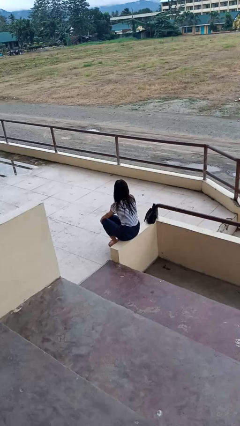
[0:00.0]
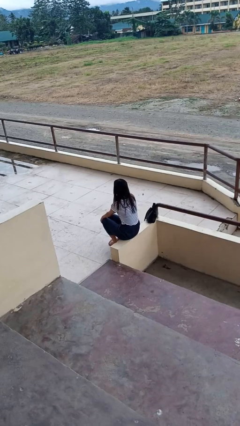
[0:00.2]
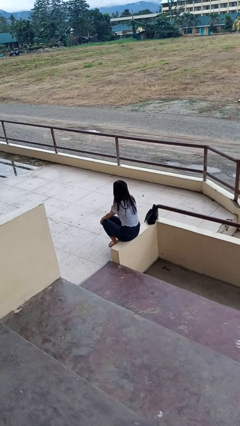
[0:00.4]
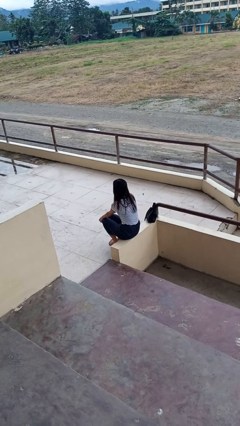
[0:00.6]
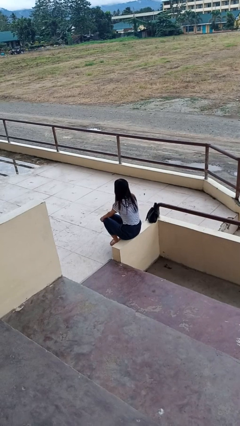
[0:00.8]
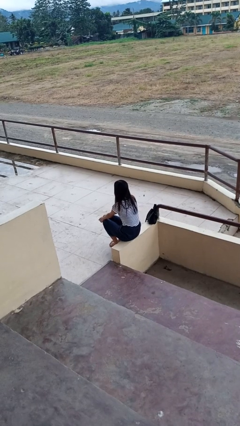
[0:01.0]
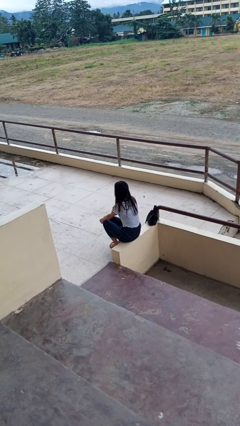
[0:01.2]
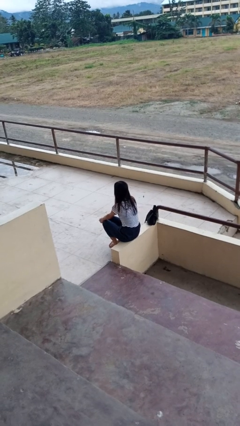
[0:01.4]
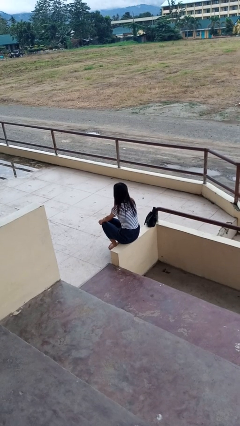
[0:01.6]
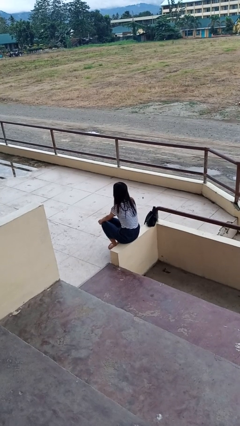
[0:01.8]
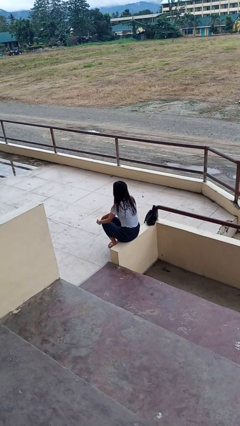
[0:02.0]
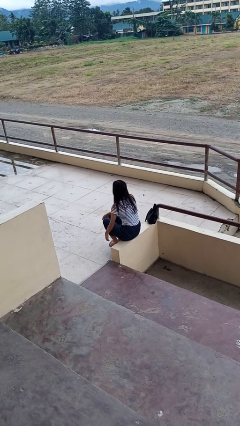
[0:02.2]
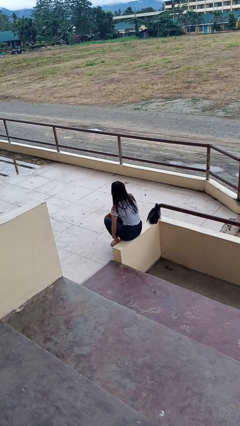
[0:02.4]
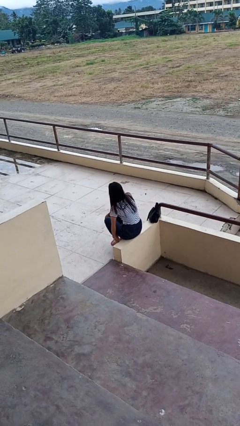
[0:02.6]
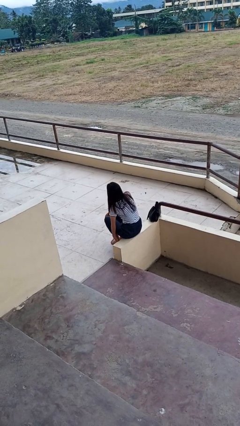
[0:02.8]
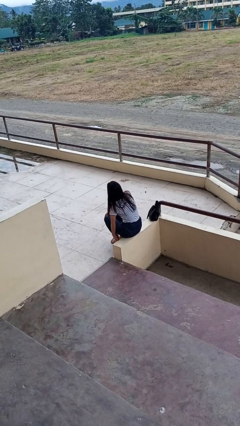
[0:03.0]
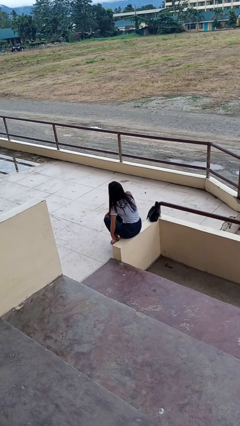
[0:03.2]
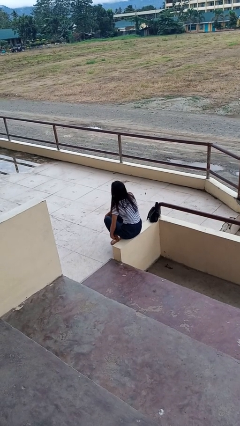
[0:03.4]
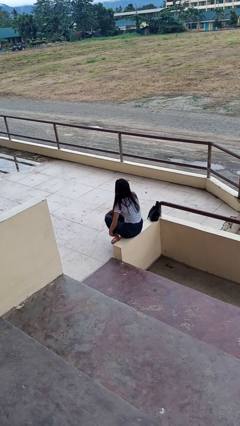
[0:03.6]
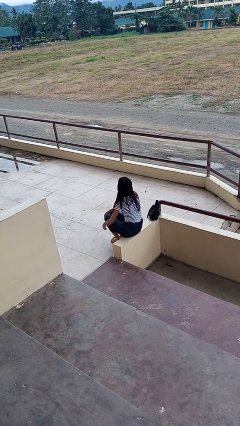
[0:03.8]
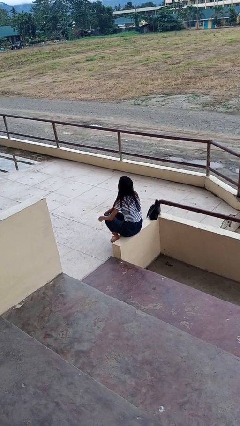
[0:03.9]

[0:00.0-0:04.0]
person rubs foot

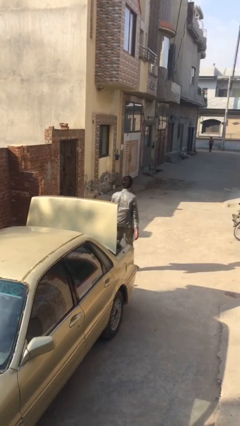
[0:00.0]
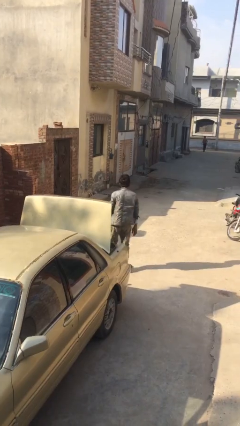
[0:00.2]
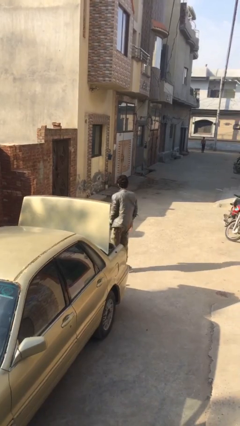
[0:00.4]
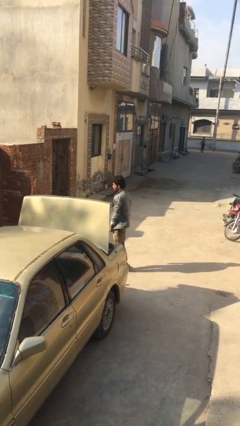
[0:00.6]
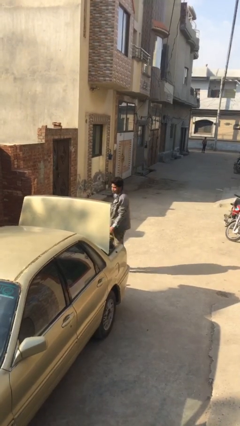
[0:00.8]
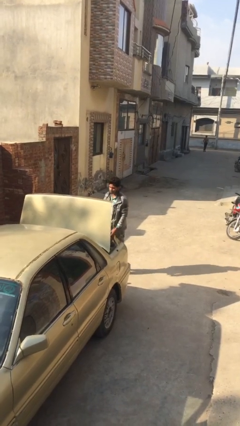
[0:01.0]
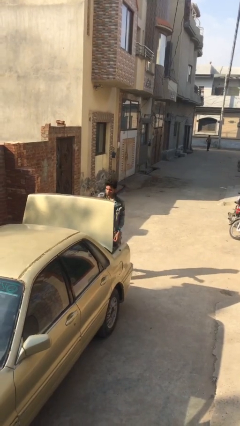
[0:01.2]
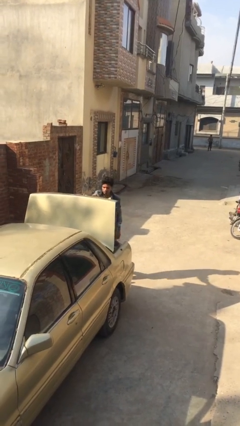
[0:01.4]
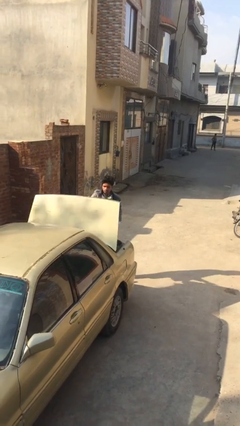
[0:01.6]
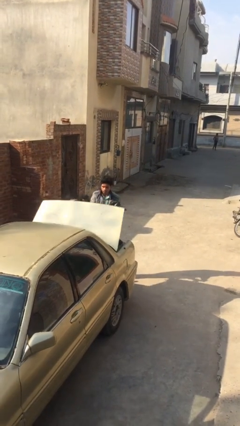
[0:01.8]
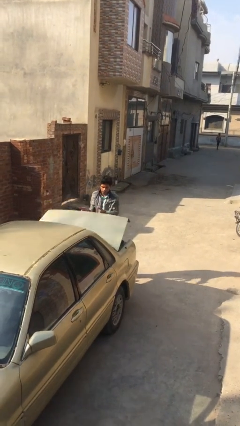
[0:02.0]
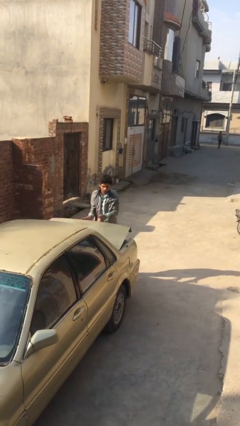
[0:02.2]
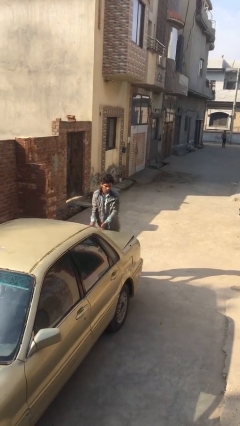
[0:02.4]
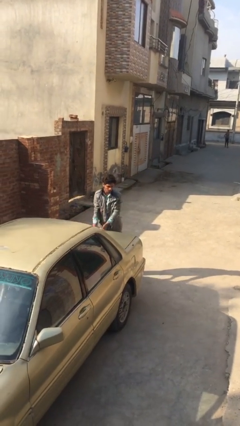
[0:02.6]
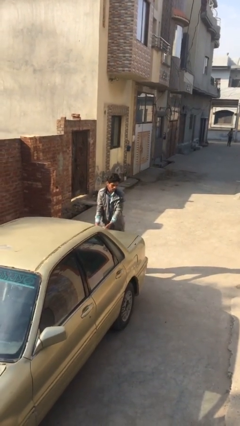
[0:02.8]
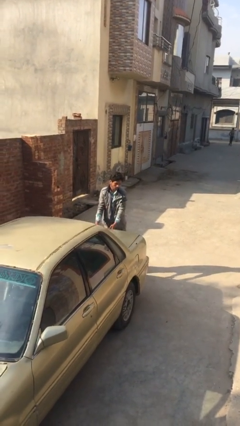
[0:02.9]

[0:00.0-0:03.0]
person closes car trunk

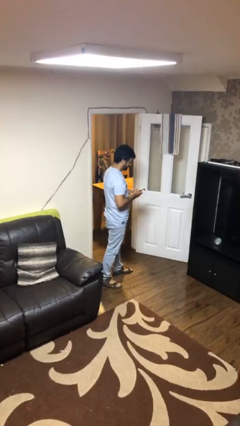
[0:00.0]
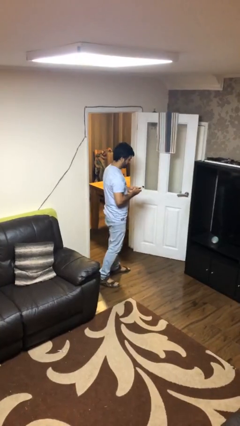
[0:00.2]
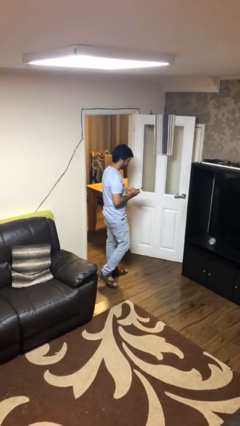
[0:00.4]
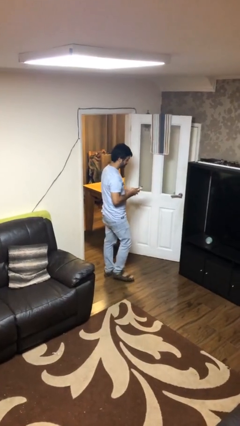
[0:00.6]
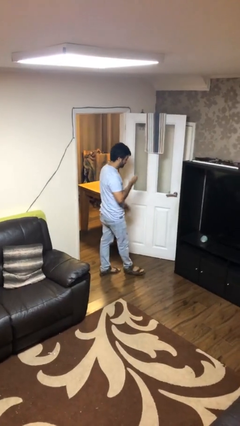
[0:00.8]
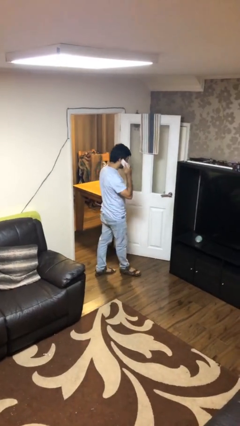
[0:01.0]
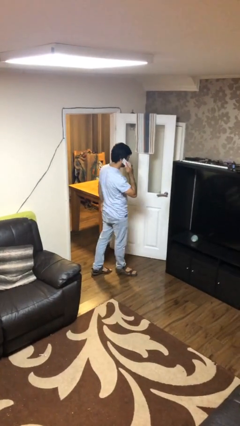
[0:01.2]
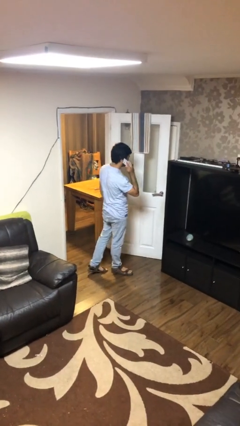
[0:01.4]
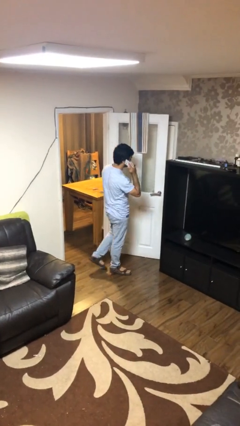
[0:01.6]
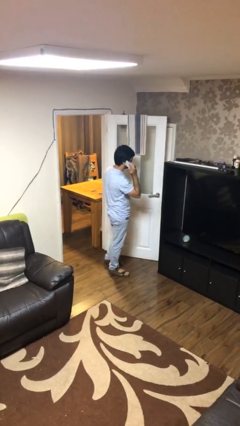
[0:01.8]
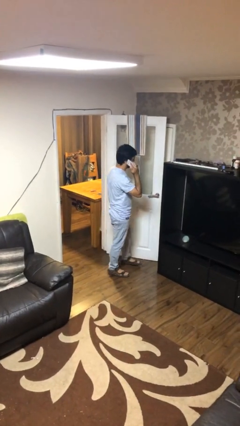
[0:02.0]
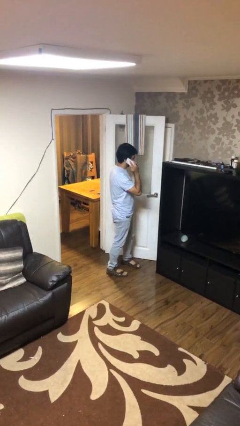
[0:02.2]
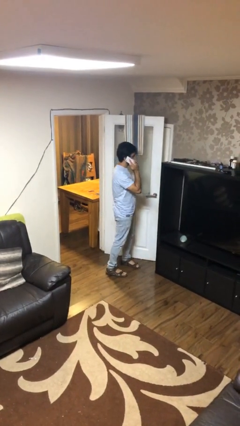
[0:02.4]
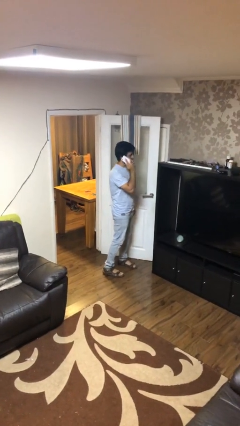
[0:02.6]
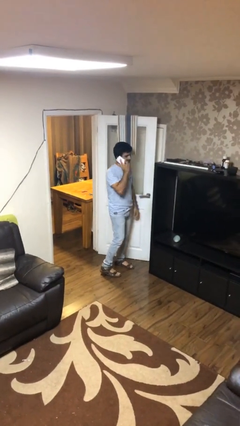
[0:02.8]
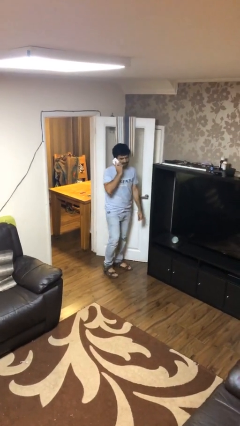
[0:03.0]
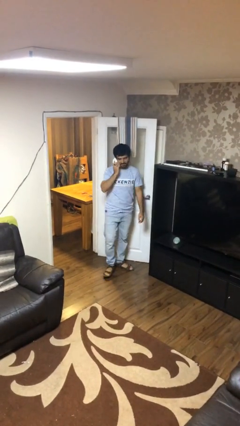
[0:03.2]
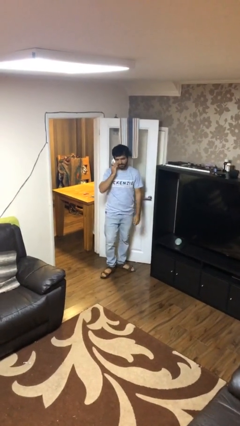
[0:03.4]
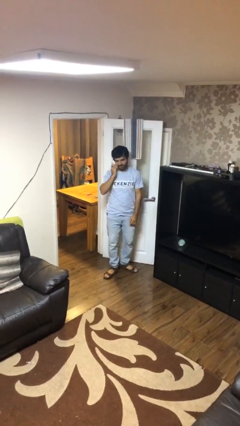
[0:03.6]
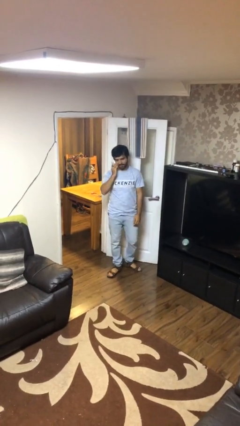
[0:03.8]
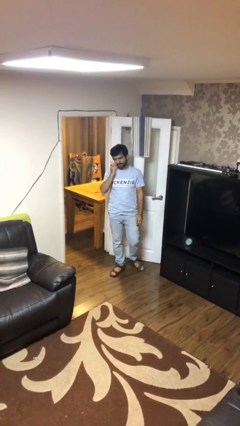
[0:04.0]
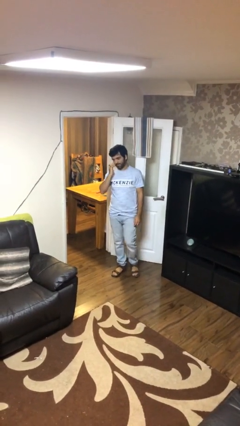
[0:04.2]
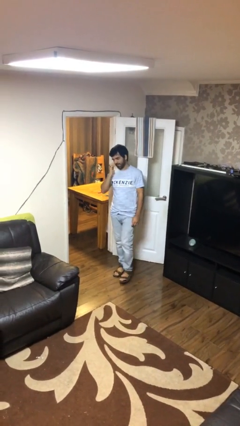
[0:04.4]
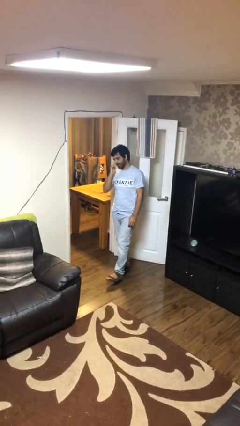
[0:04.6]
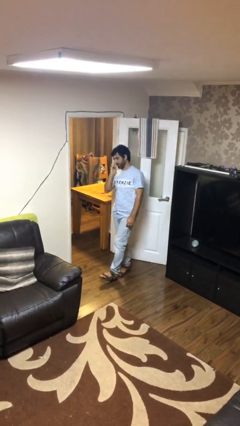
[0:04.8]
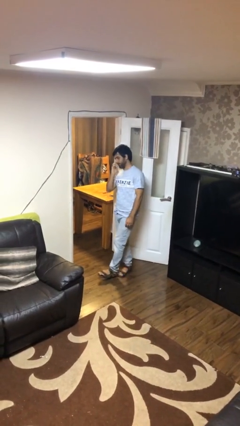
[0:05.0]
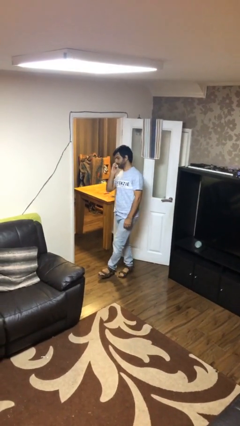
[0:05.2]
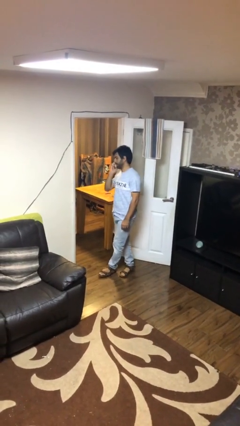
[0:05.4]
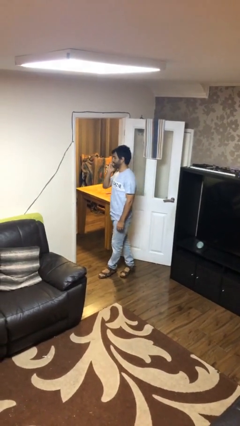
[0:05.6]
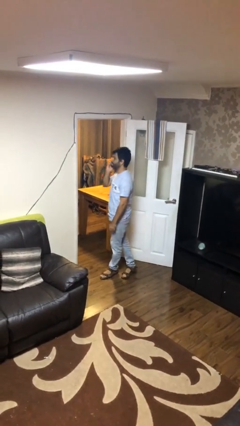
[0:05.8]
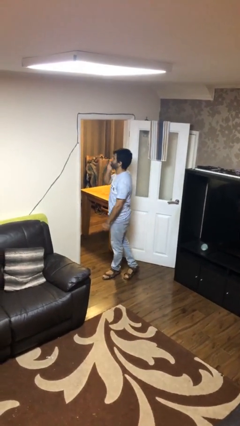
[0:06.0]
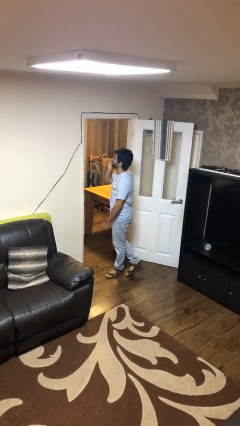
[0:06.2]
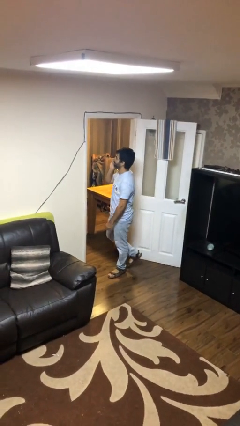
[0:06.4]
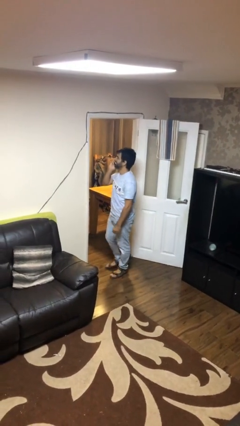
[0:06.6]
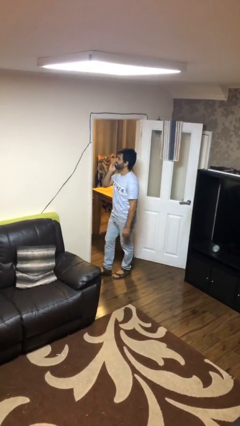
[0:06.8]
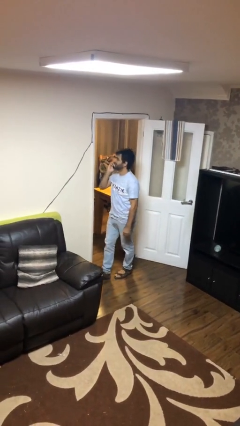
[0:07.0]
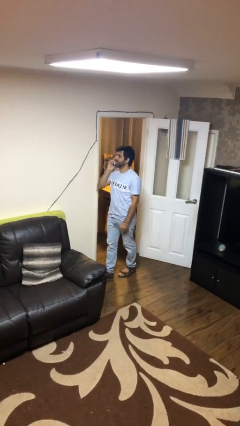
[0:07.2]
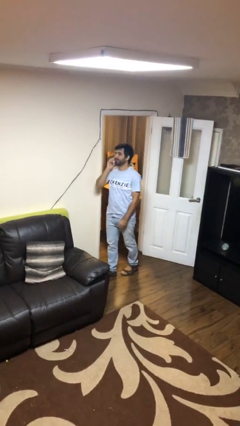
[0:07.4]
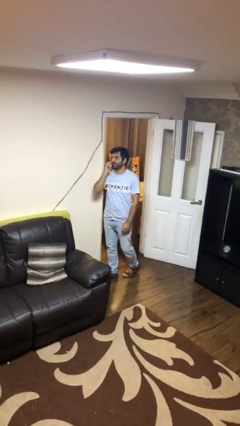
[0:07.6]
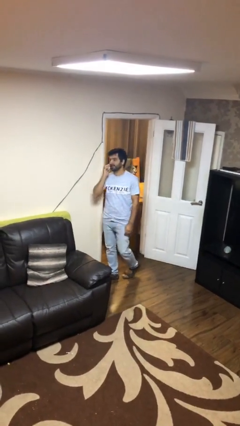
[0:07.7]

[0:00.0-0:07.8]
person talks on phone

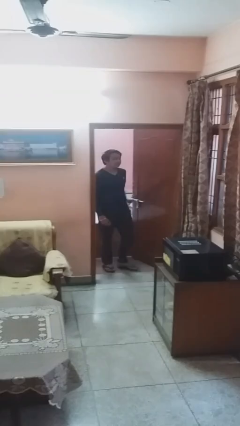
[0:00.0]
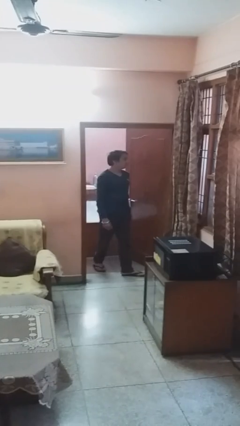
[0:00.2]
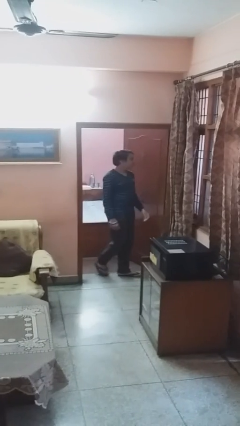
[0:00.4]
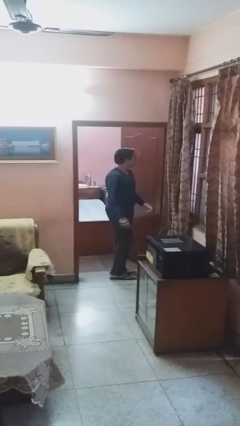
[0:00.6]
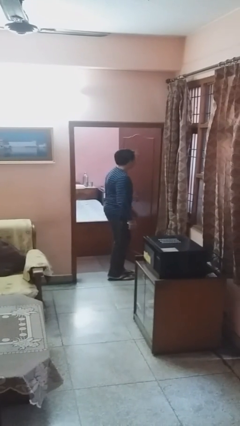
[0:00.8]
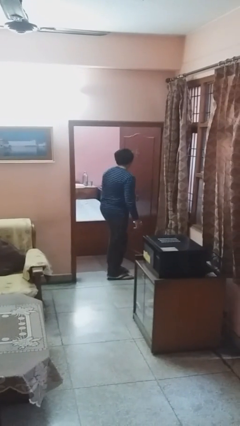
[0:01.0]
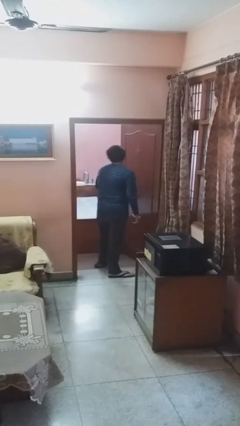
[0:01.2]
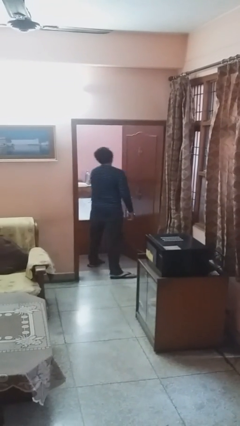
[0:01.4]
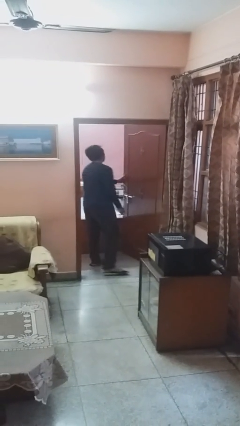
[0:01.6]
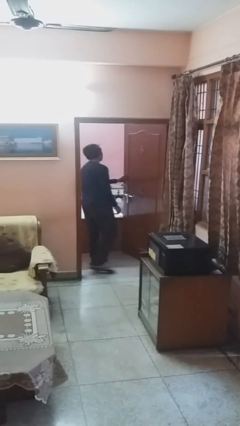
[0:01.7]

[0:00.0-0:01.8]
person opens facility door

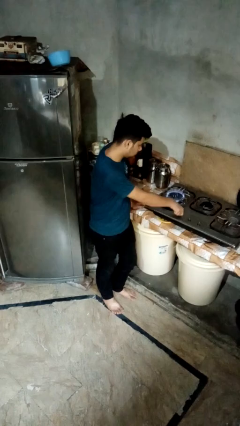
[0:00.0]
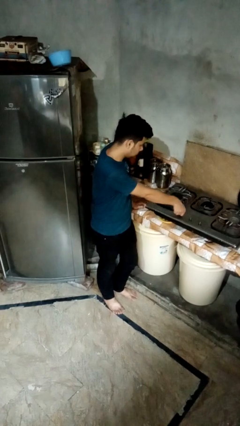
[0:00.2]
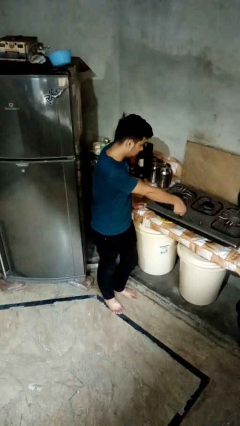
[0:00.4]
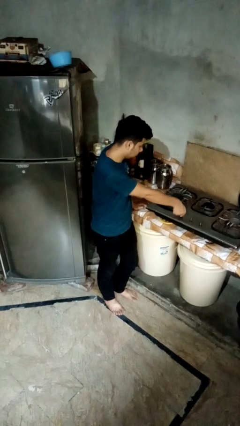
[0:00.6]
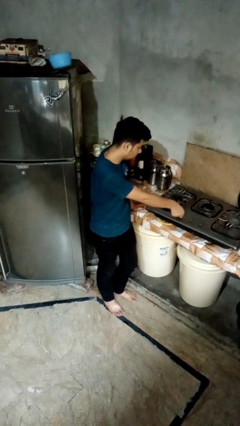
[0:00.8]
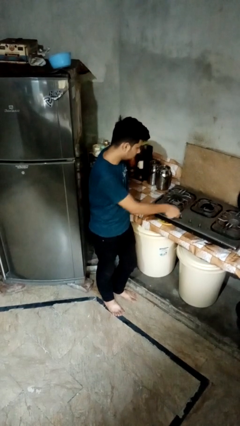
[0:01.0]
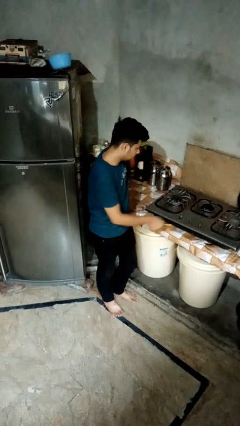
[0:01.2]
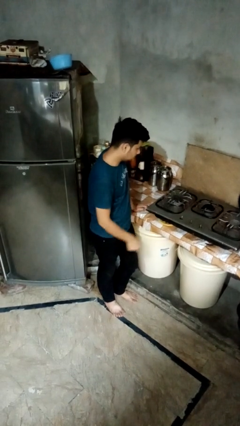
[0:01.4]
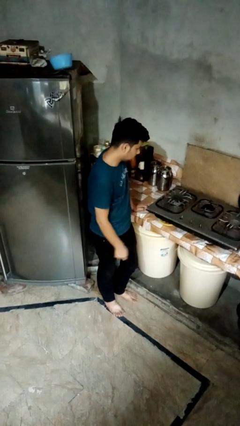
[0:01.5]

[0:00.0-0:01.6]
person turns off stovetop
